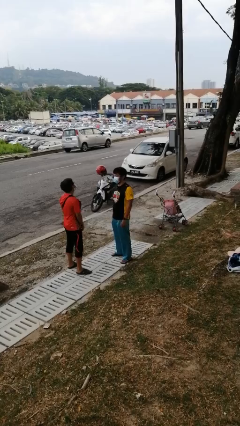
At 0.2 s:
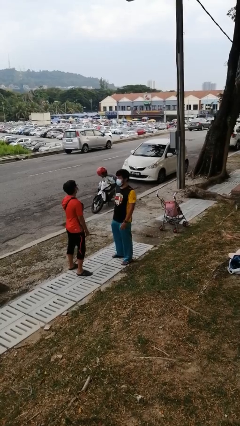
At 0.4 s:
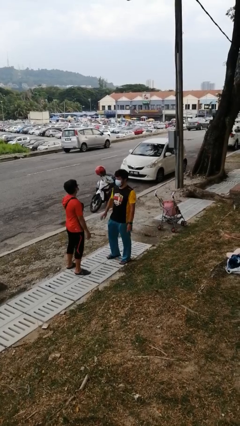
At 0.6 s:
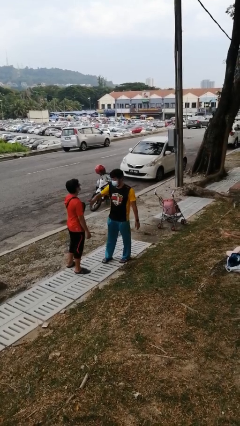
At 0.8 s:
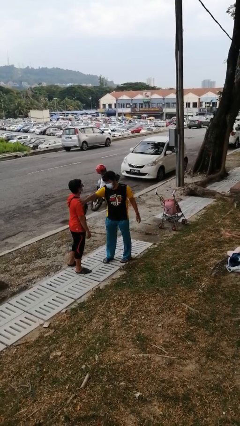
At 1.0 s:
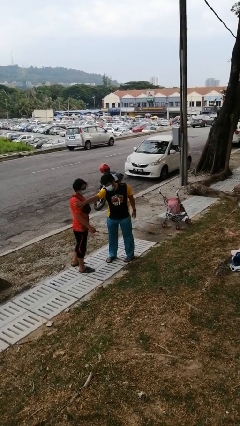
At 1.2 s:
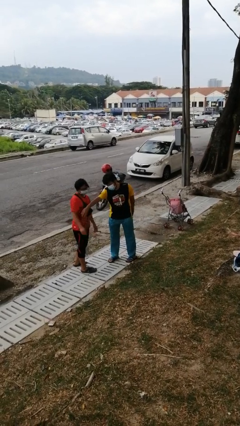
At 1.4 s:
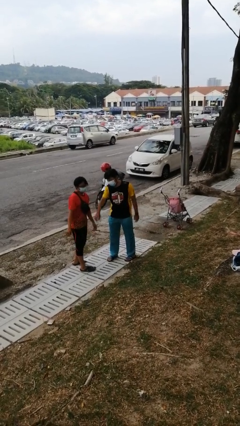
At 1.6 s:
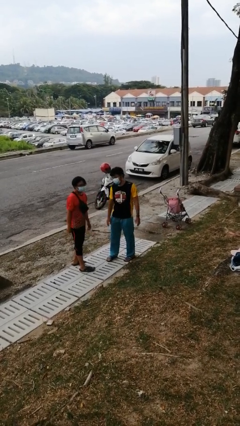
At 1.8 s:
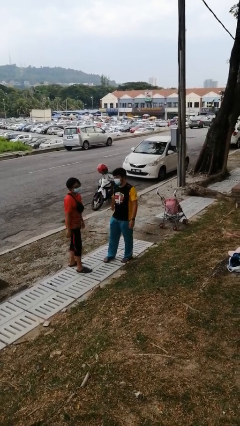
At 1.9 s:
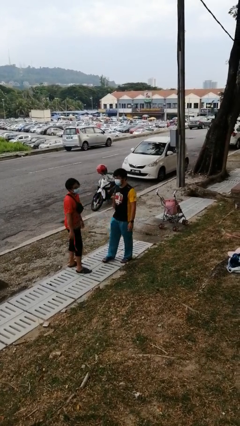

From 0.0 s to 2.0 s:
person shoves person

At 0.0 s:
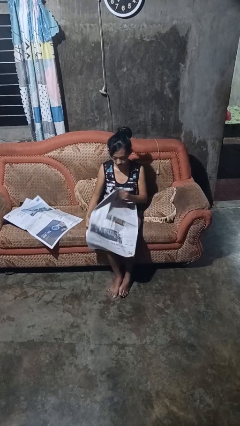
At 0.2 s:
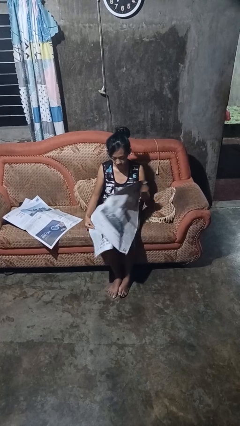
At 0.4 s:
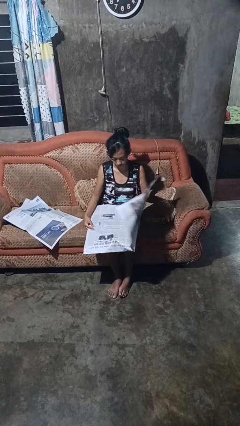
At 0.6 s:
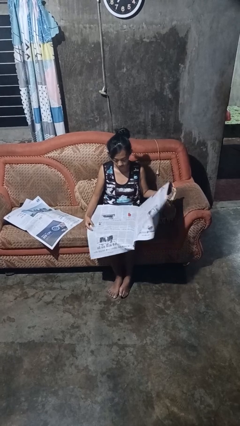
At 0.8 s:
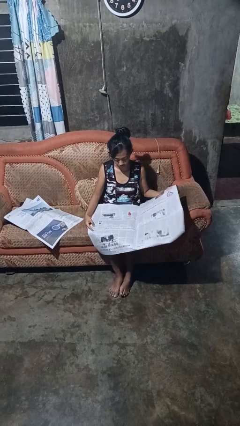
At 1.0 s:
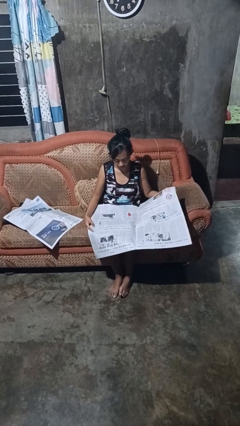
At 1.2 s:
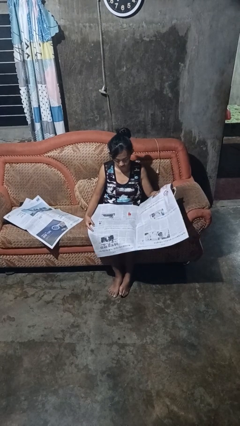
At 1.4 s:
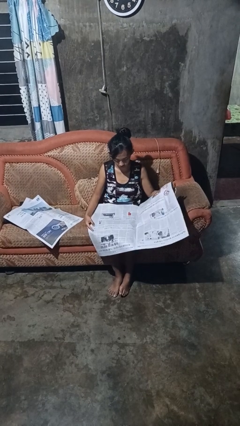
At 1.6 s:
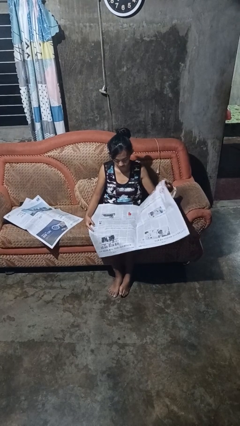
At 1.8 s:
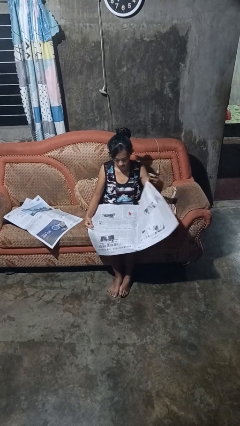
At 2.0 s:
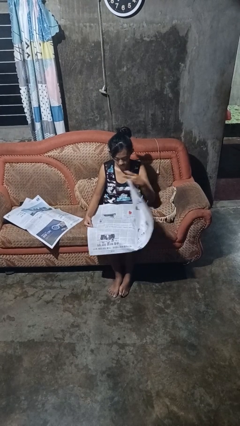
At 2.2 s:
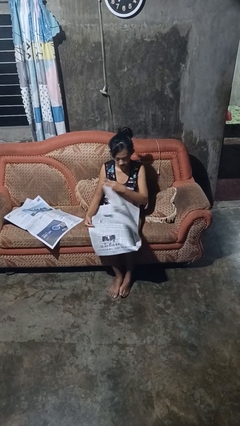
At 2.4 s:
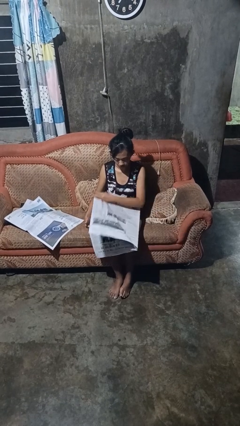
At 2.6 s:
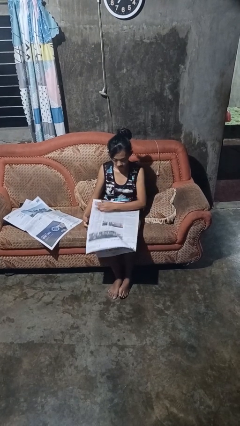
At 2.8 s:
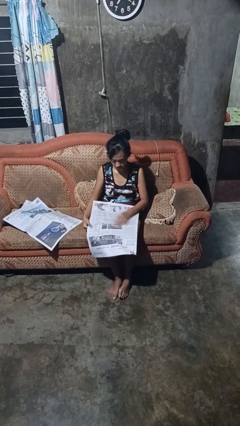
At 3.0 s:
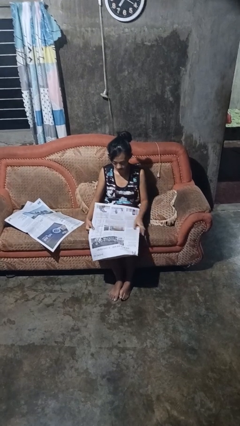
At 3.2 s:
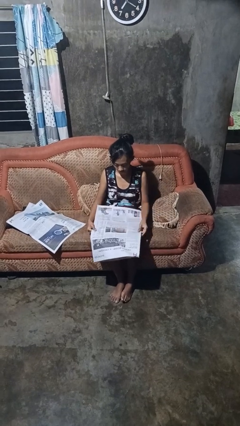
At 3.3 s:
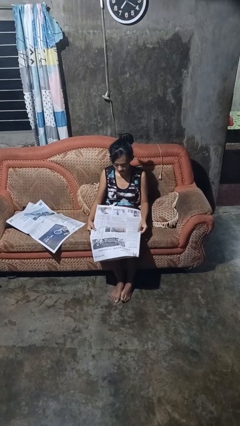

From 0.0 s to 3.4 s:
person reads newspaper

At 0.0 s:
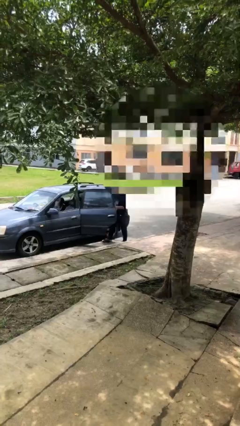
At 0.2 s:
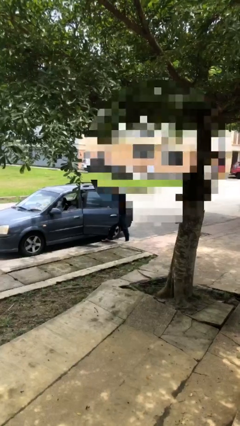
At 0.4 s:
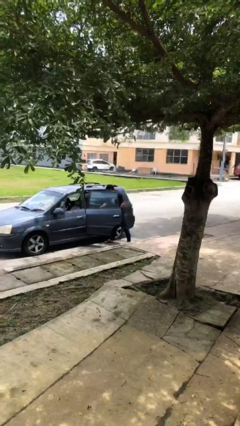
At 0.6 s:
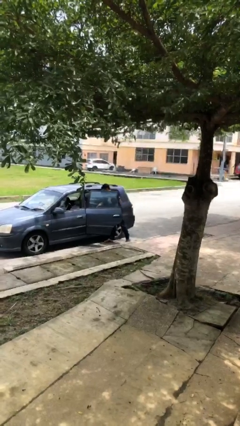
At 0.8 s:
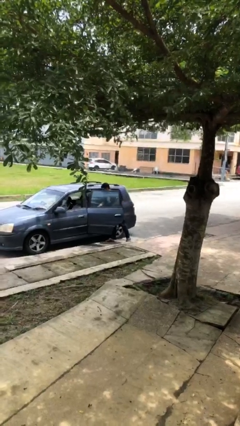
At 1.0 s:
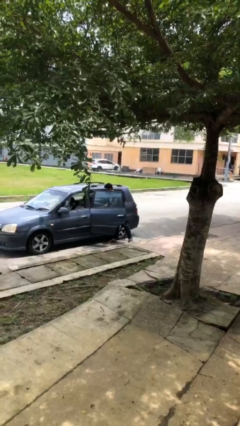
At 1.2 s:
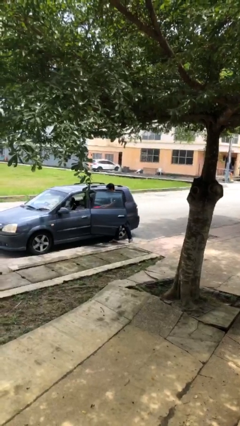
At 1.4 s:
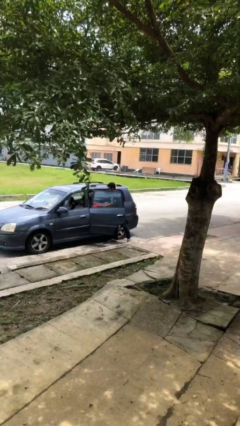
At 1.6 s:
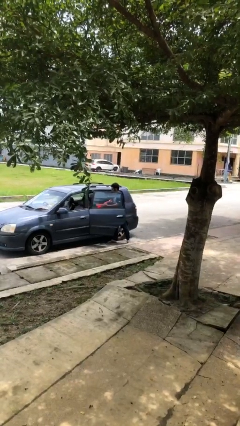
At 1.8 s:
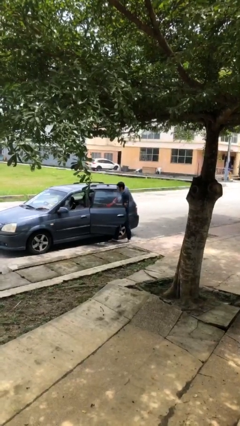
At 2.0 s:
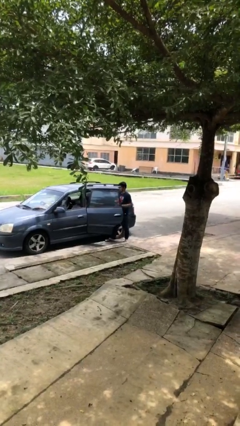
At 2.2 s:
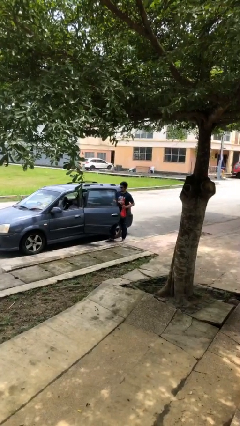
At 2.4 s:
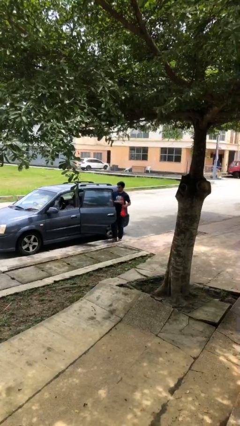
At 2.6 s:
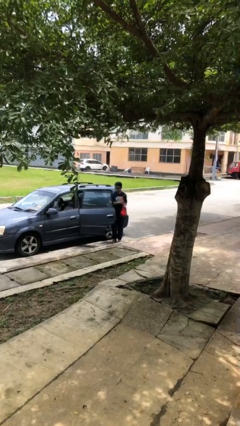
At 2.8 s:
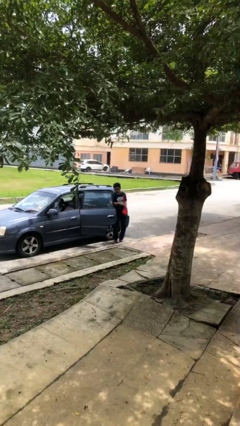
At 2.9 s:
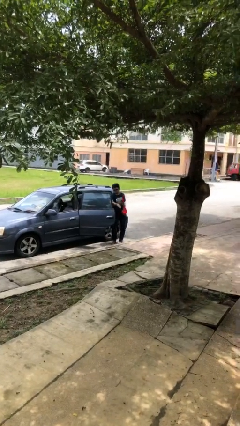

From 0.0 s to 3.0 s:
person unloads car

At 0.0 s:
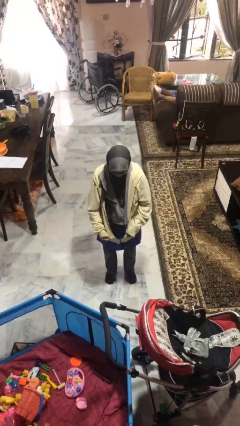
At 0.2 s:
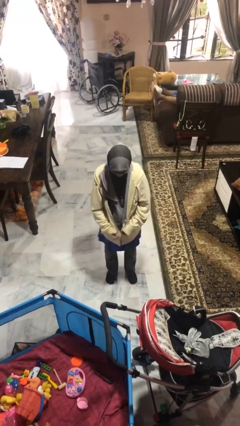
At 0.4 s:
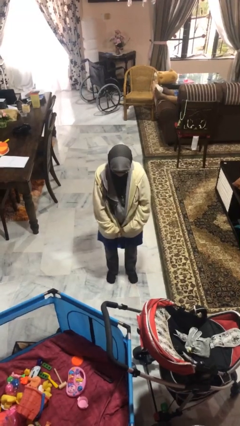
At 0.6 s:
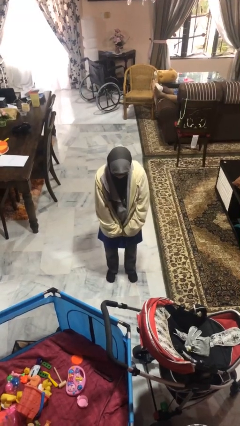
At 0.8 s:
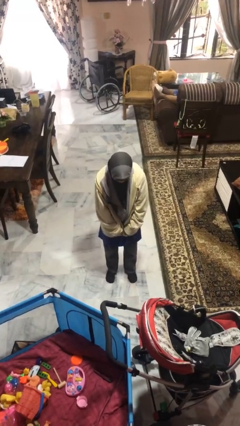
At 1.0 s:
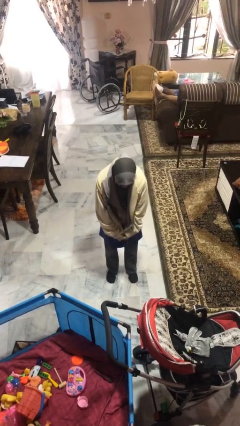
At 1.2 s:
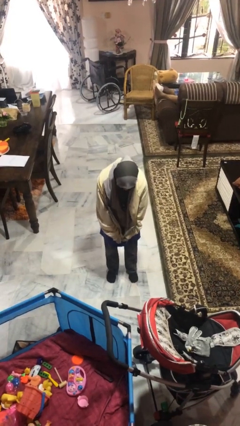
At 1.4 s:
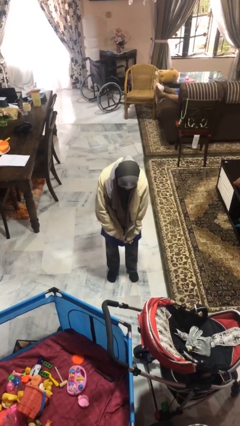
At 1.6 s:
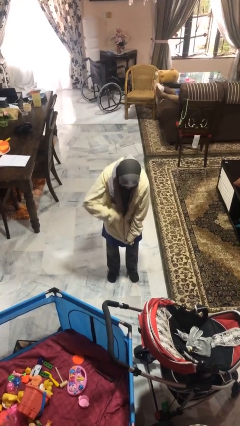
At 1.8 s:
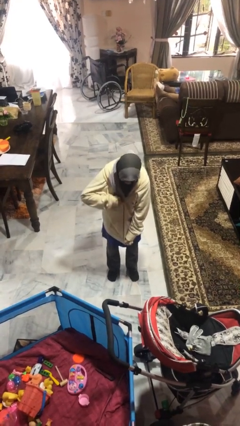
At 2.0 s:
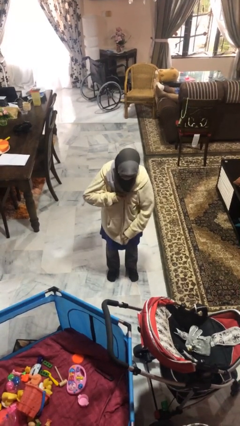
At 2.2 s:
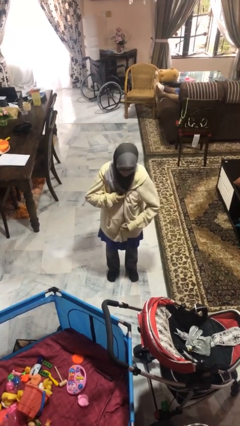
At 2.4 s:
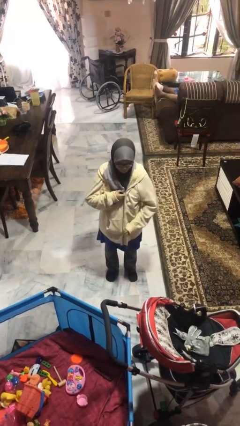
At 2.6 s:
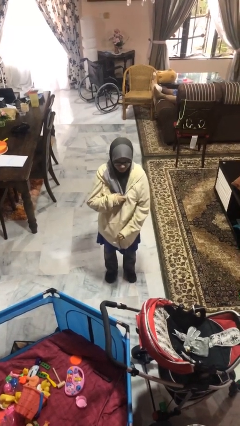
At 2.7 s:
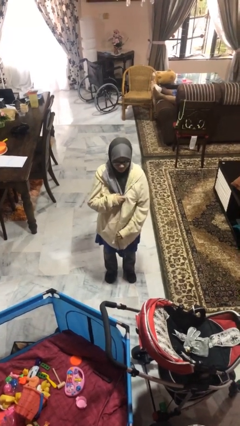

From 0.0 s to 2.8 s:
person zips up jacket

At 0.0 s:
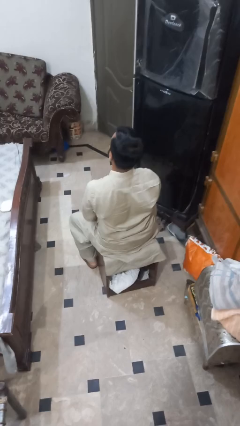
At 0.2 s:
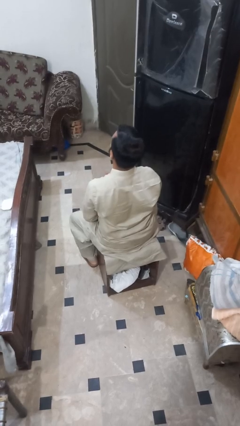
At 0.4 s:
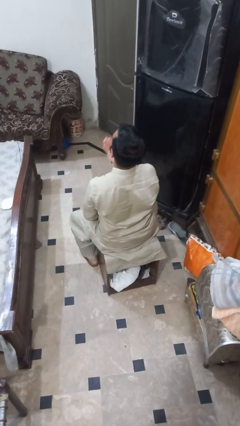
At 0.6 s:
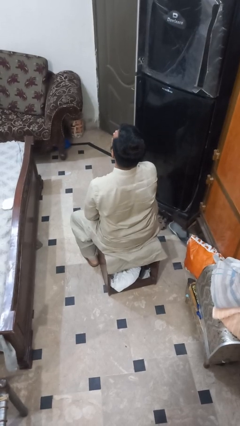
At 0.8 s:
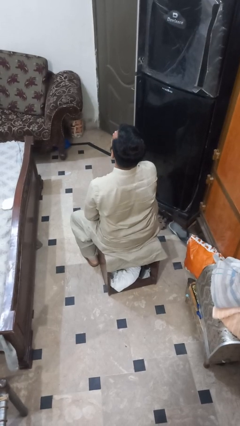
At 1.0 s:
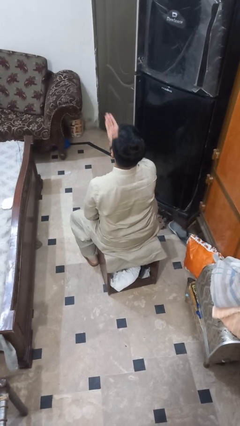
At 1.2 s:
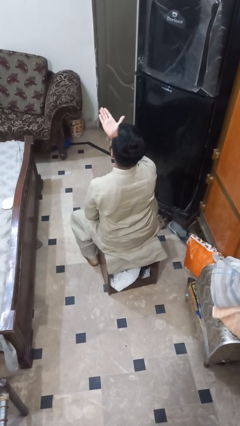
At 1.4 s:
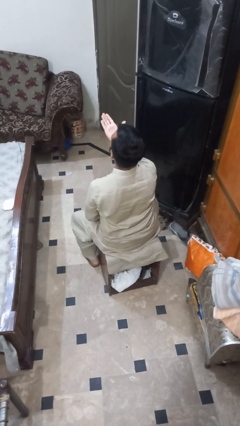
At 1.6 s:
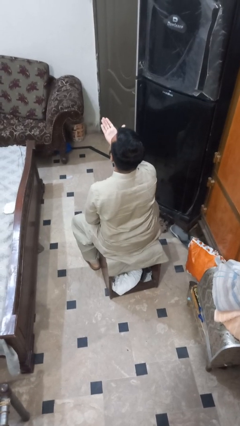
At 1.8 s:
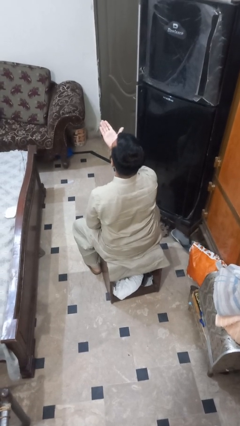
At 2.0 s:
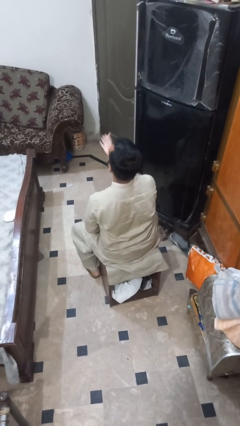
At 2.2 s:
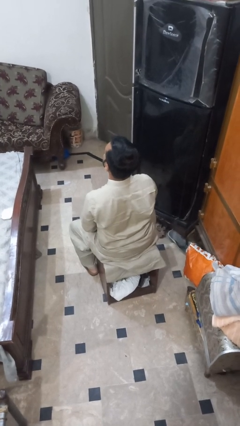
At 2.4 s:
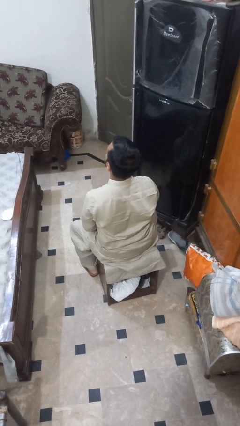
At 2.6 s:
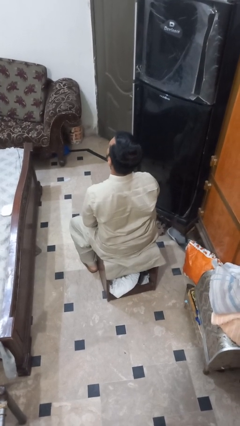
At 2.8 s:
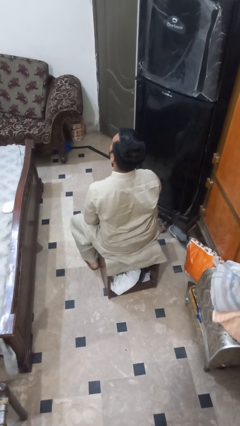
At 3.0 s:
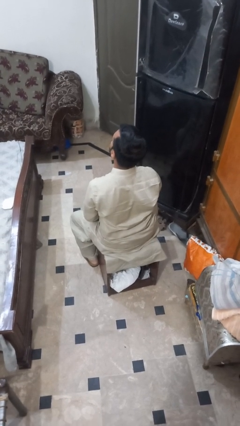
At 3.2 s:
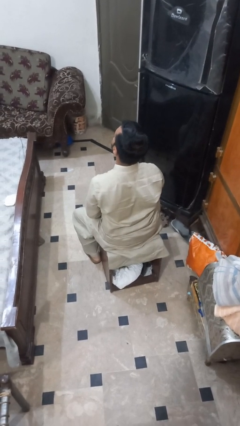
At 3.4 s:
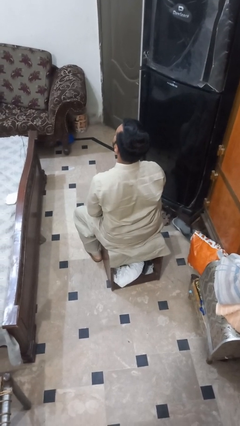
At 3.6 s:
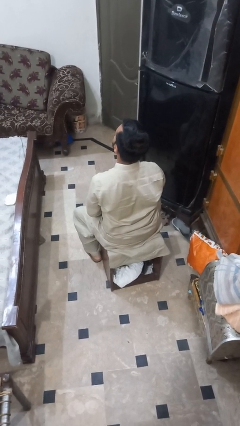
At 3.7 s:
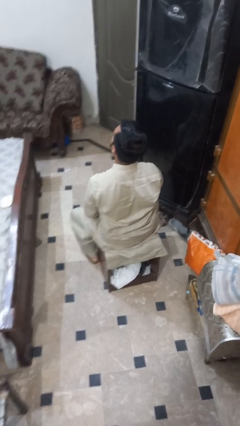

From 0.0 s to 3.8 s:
person gestures blow kiss

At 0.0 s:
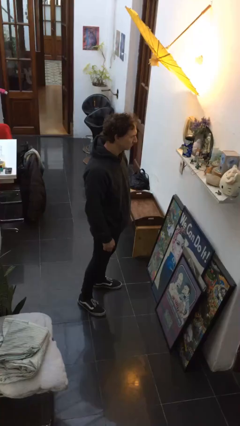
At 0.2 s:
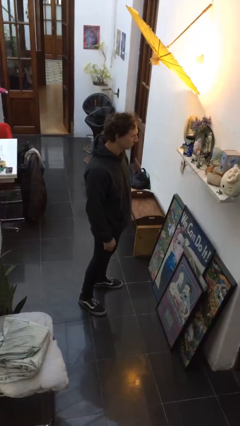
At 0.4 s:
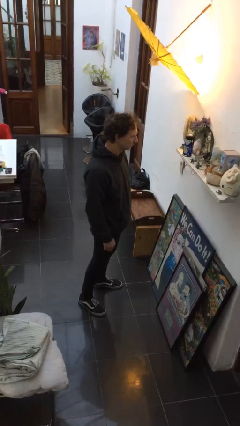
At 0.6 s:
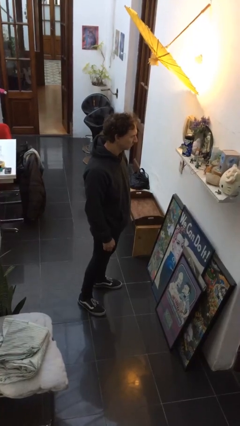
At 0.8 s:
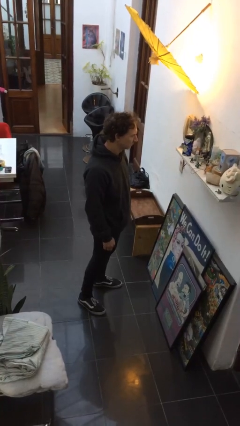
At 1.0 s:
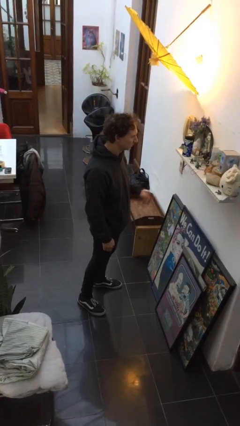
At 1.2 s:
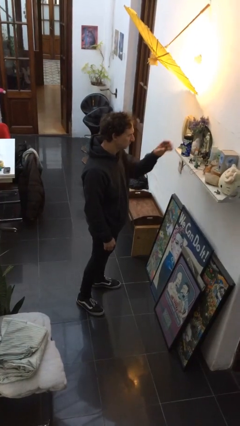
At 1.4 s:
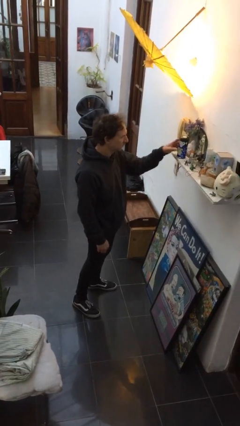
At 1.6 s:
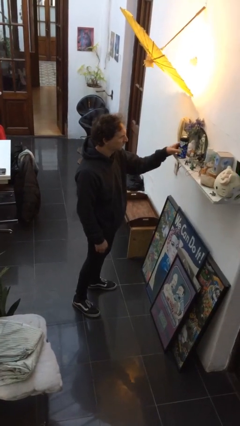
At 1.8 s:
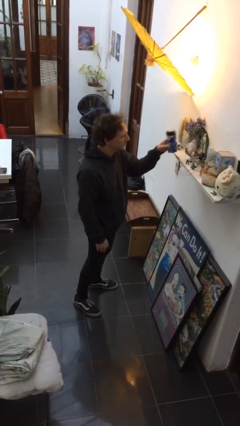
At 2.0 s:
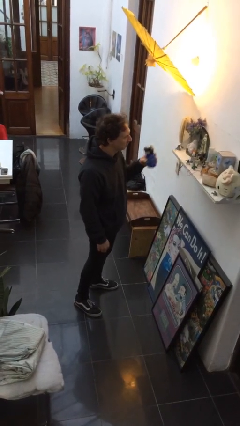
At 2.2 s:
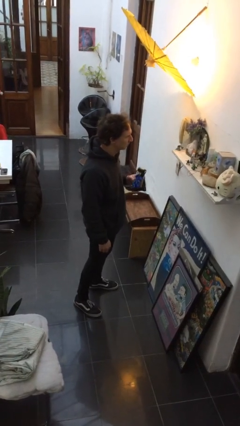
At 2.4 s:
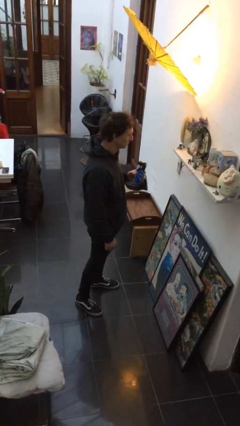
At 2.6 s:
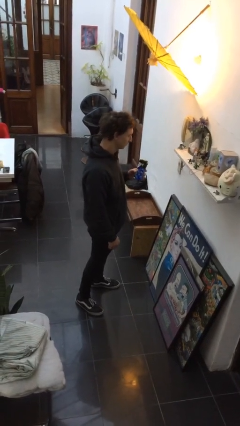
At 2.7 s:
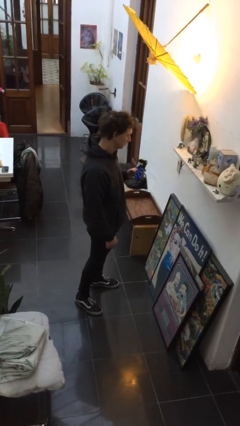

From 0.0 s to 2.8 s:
person picks up object from shelf
